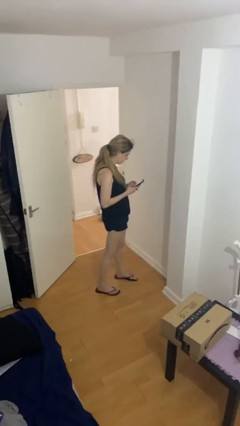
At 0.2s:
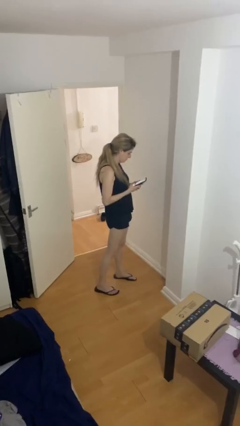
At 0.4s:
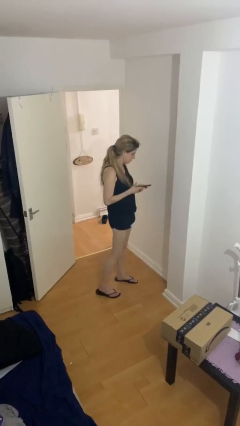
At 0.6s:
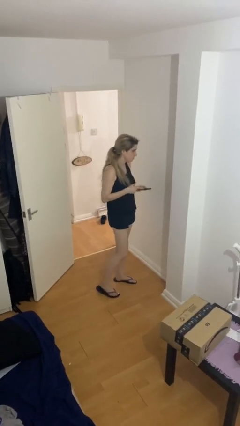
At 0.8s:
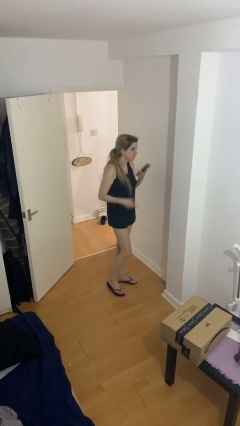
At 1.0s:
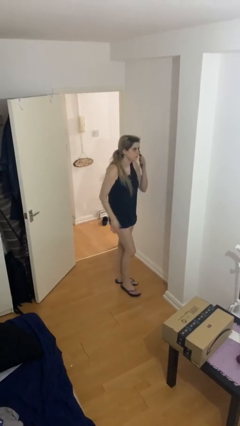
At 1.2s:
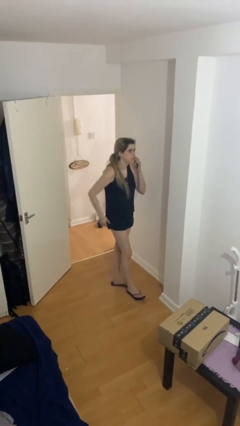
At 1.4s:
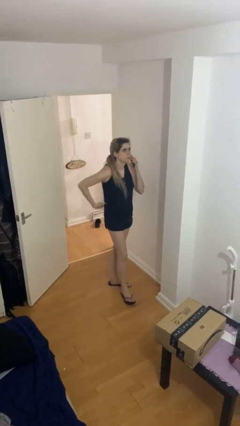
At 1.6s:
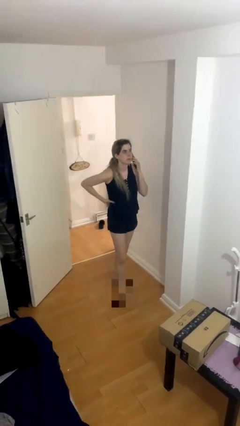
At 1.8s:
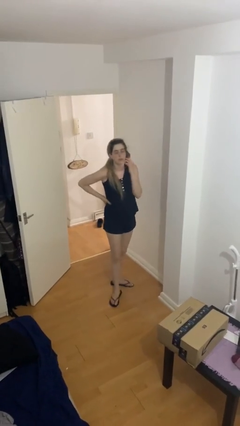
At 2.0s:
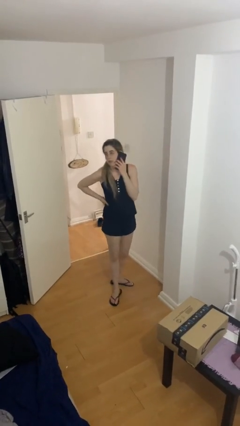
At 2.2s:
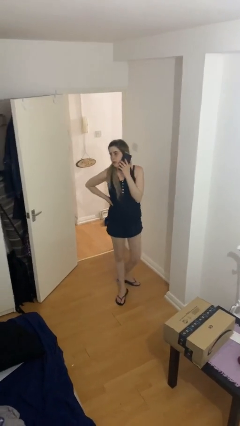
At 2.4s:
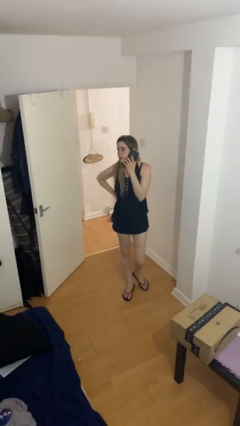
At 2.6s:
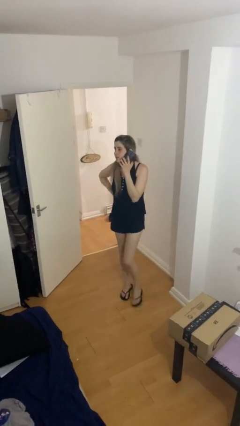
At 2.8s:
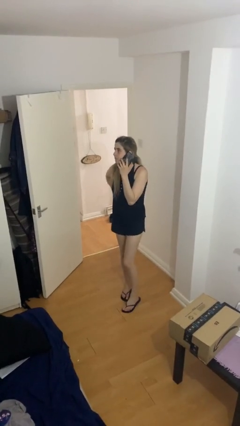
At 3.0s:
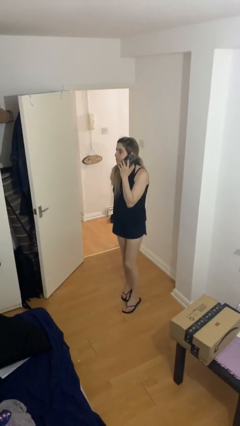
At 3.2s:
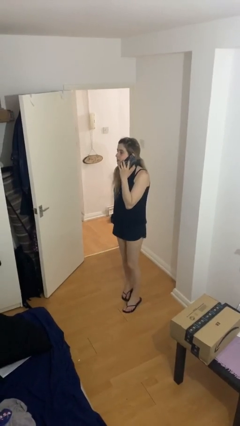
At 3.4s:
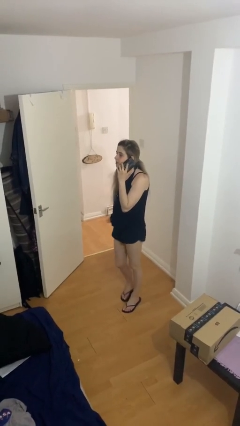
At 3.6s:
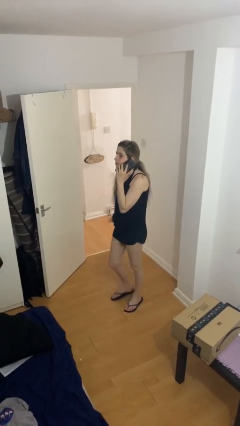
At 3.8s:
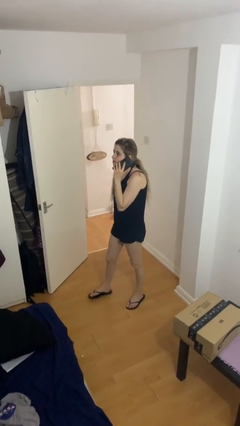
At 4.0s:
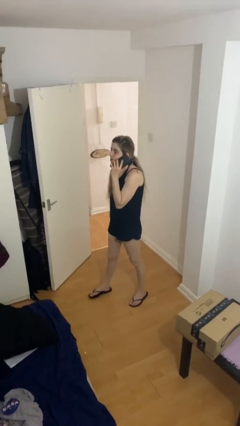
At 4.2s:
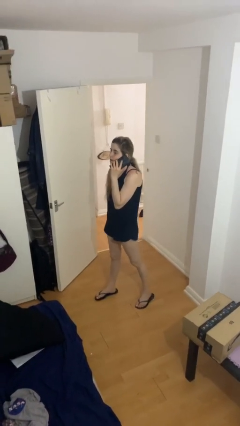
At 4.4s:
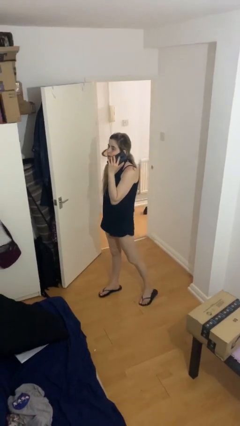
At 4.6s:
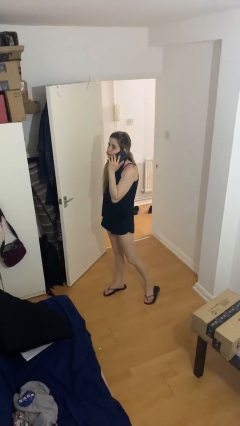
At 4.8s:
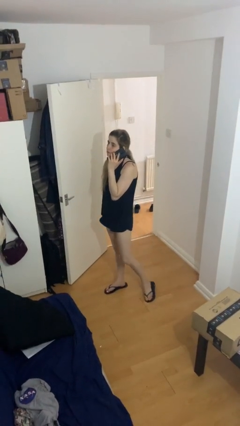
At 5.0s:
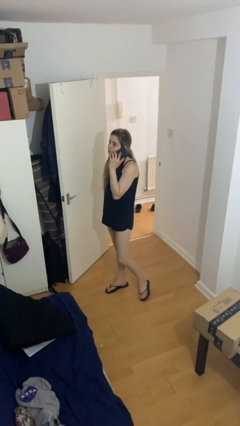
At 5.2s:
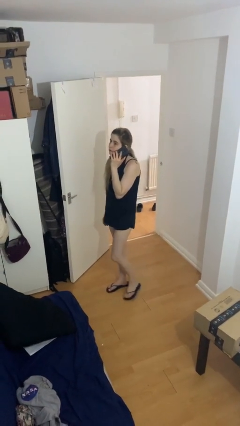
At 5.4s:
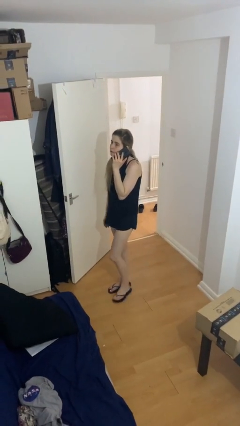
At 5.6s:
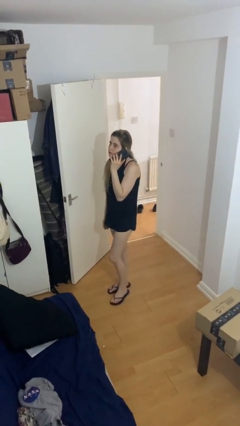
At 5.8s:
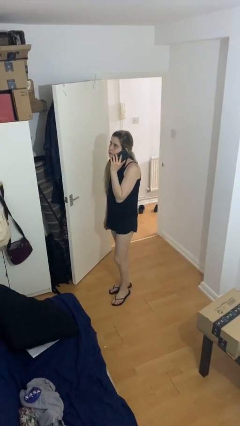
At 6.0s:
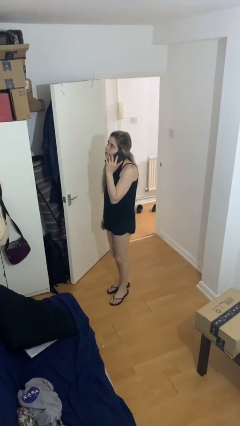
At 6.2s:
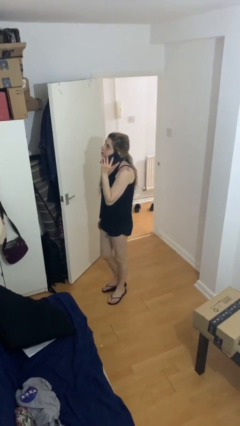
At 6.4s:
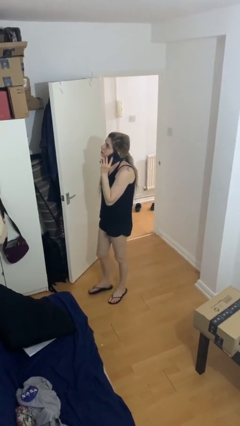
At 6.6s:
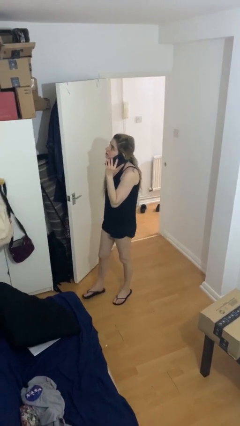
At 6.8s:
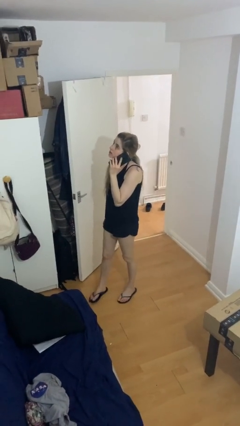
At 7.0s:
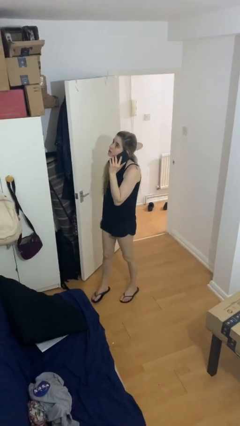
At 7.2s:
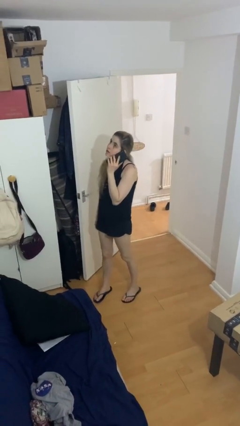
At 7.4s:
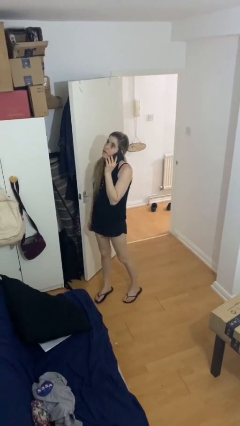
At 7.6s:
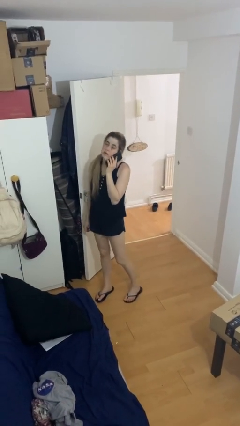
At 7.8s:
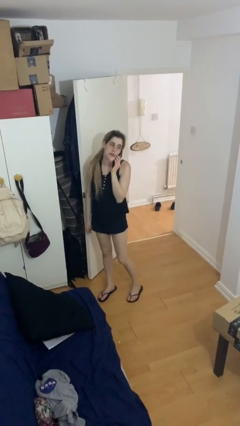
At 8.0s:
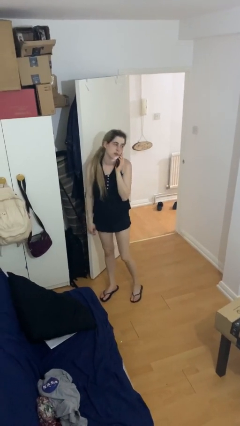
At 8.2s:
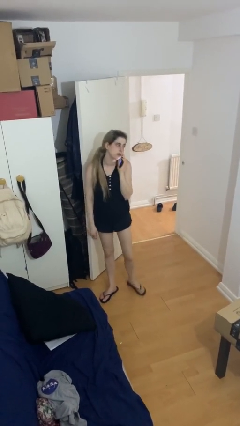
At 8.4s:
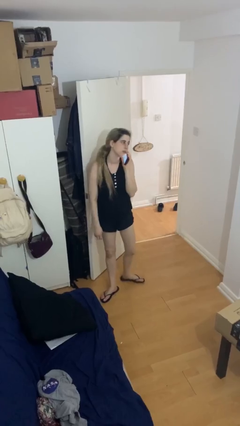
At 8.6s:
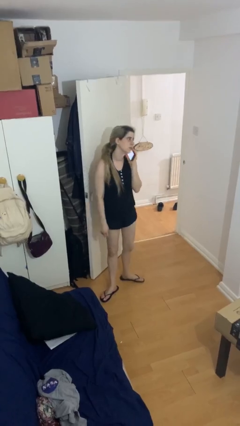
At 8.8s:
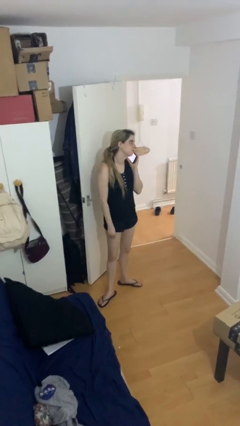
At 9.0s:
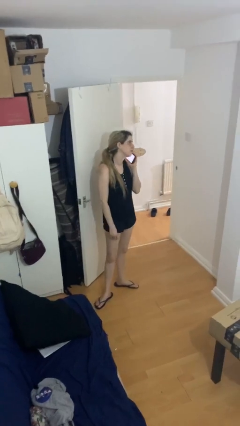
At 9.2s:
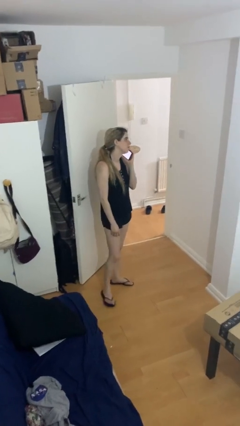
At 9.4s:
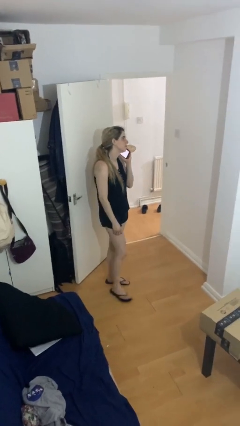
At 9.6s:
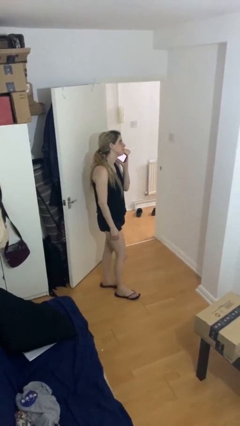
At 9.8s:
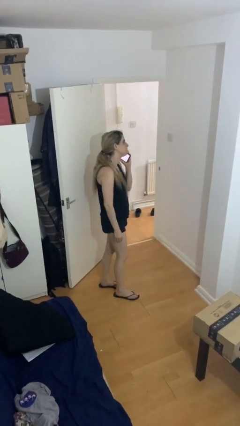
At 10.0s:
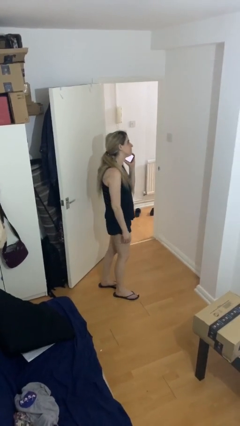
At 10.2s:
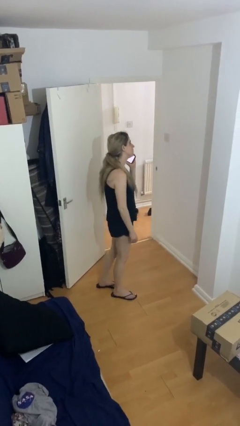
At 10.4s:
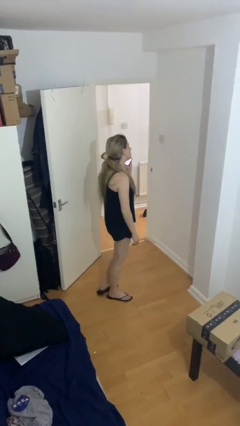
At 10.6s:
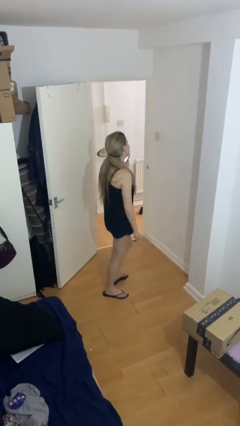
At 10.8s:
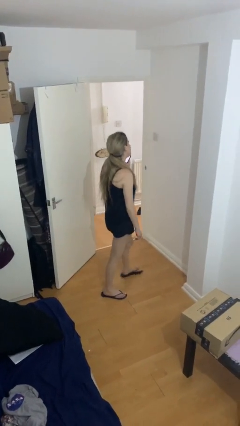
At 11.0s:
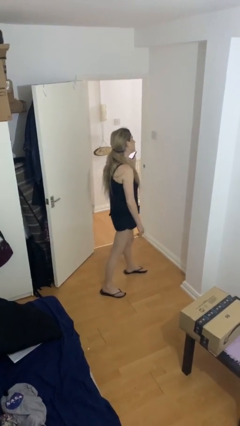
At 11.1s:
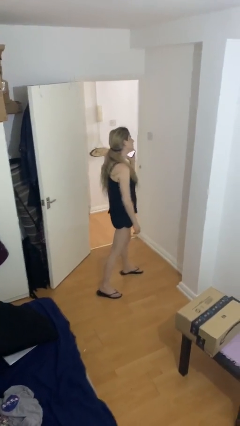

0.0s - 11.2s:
person talks on phone

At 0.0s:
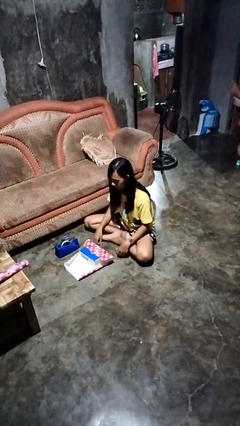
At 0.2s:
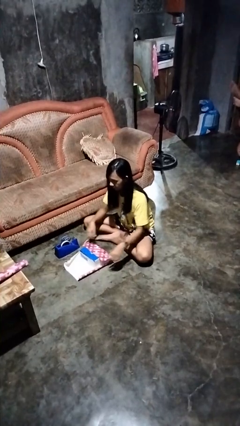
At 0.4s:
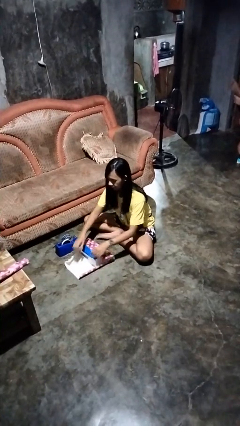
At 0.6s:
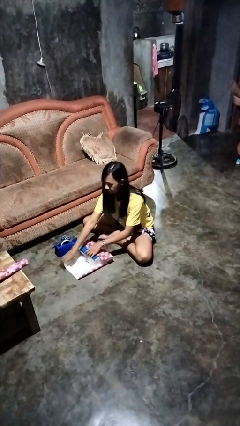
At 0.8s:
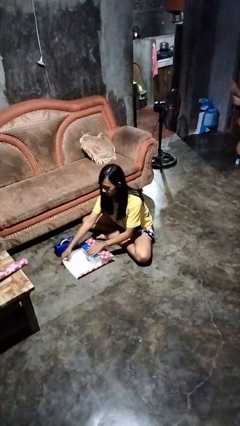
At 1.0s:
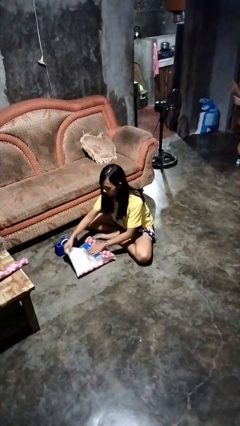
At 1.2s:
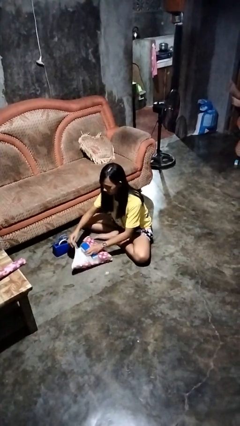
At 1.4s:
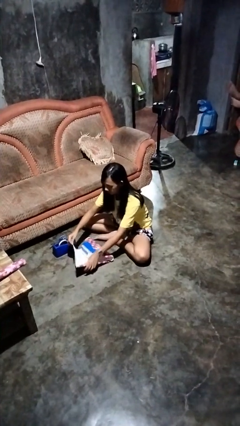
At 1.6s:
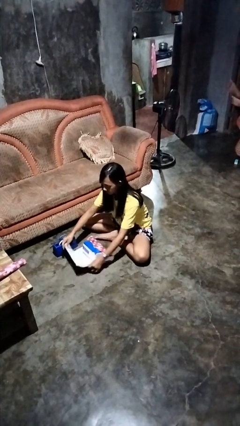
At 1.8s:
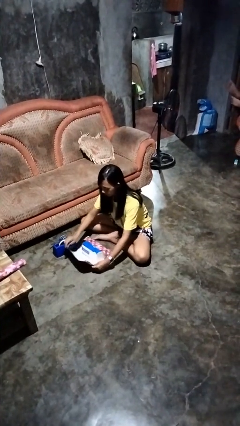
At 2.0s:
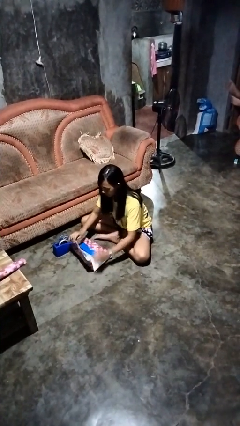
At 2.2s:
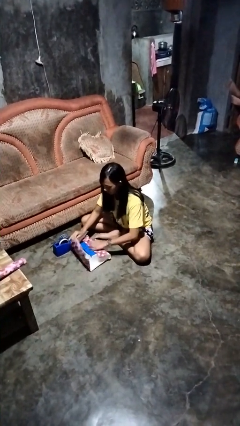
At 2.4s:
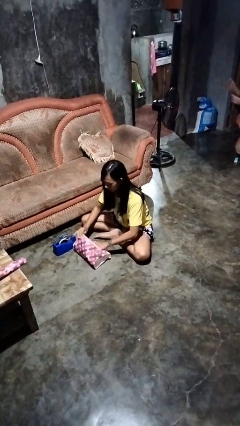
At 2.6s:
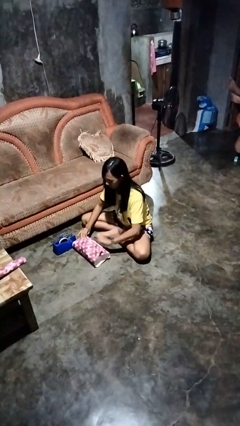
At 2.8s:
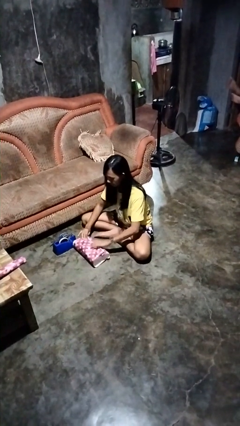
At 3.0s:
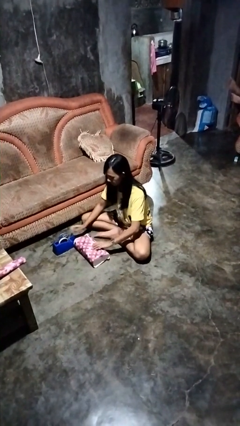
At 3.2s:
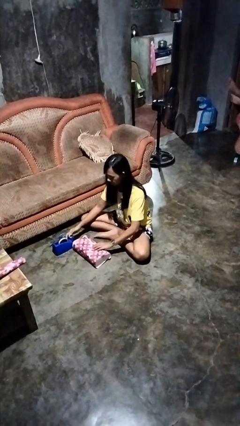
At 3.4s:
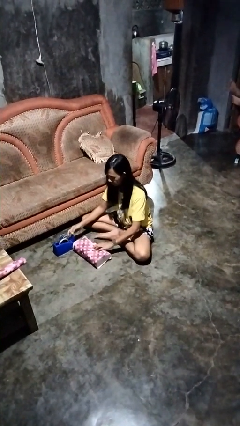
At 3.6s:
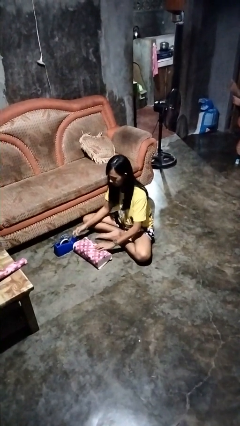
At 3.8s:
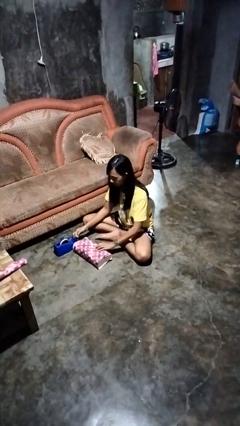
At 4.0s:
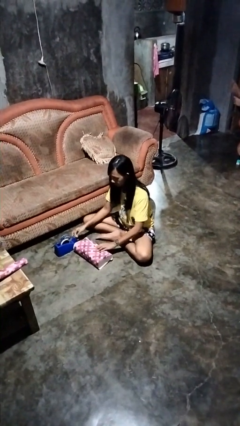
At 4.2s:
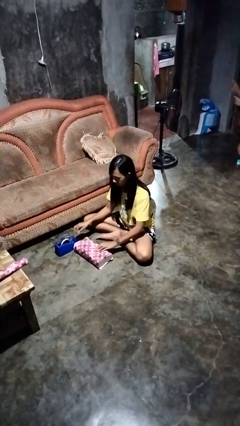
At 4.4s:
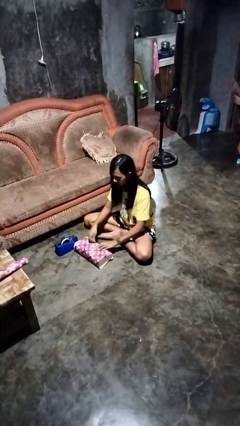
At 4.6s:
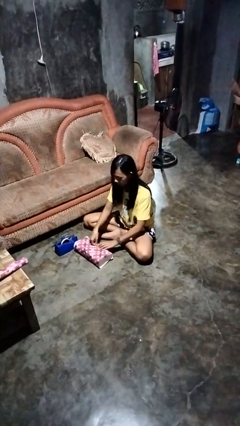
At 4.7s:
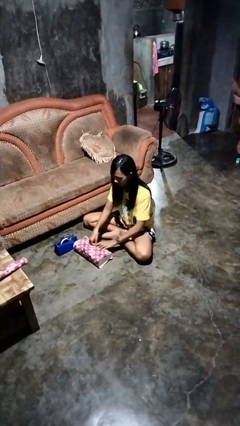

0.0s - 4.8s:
person wraps box

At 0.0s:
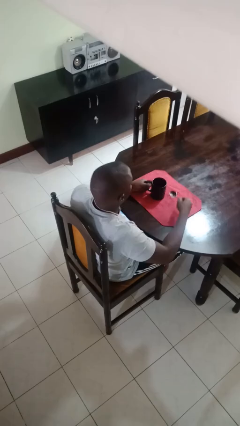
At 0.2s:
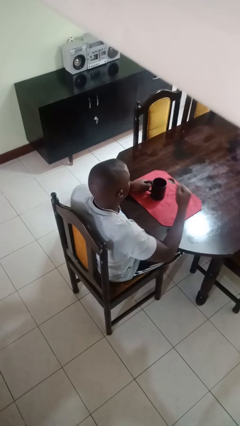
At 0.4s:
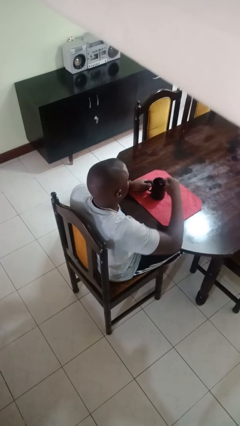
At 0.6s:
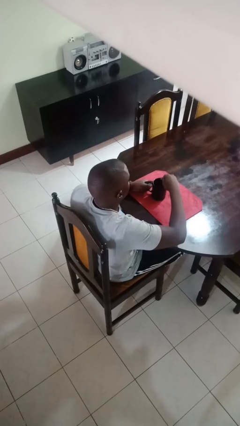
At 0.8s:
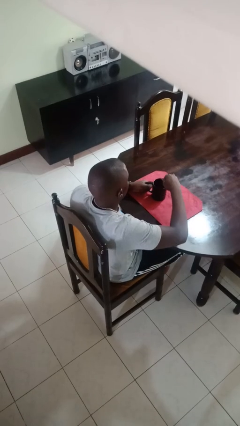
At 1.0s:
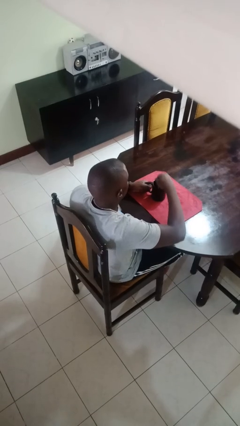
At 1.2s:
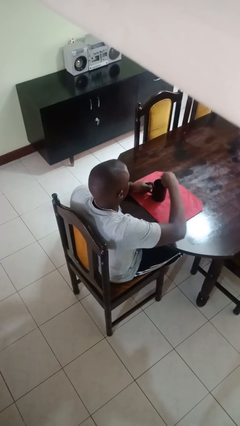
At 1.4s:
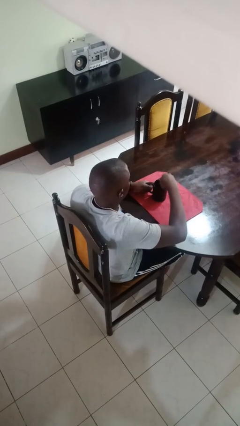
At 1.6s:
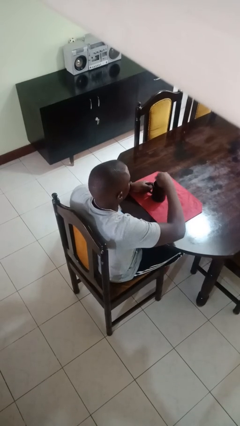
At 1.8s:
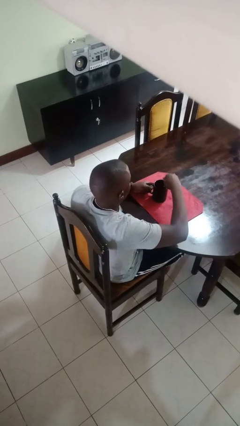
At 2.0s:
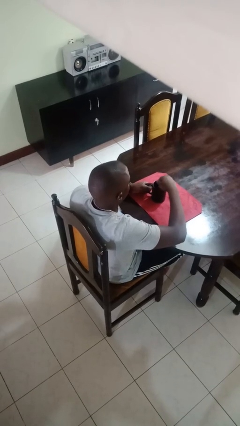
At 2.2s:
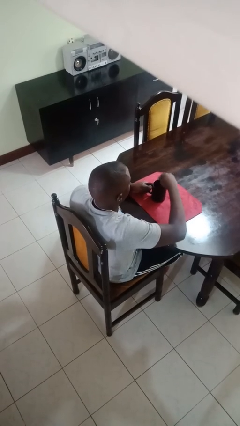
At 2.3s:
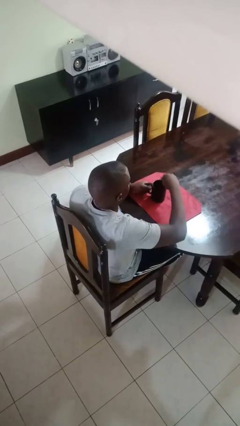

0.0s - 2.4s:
person stirs mug
